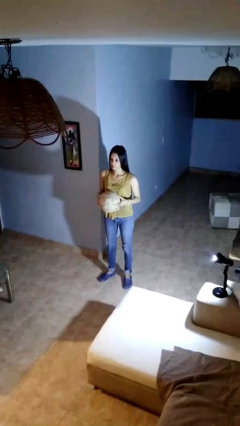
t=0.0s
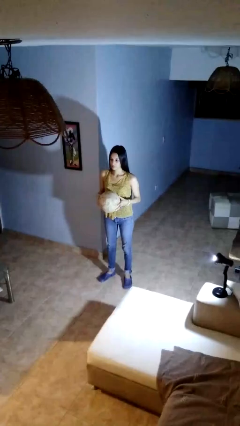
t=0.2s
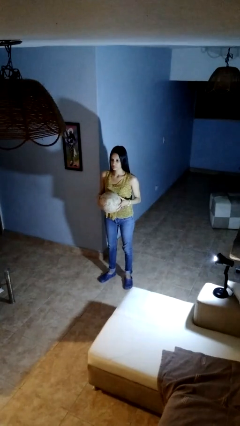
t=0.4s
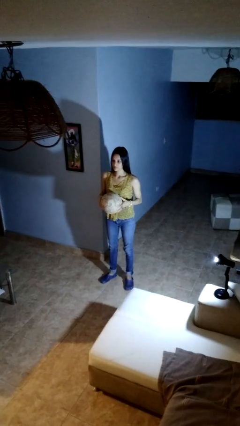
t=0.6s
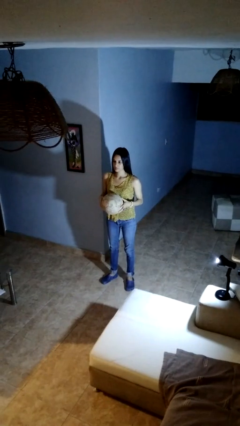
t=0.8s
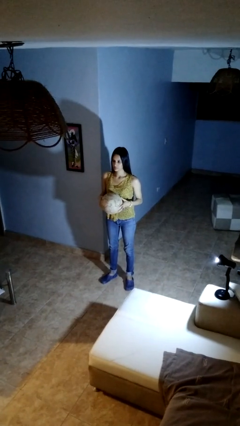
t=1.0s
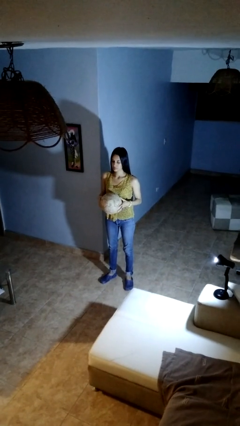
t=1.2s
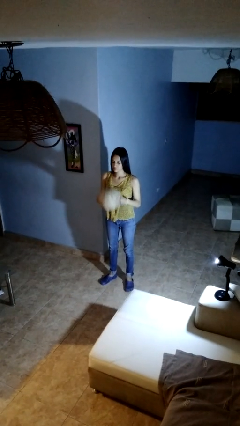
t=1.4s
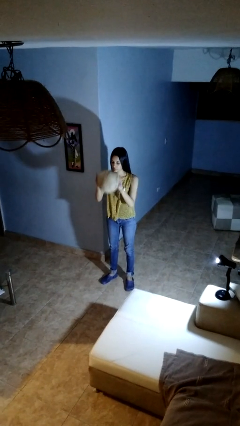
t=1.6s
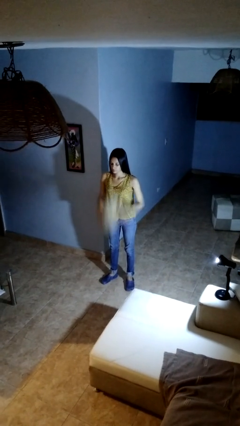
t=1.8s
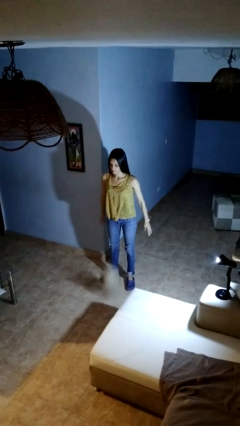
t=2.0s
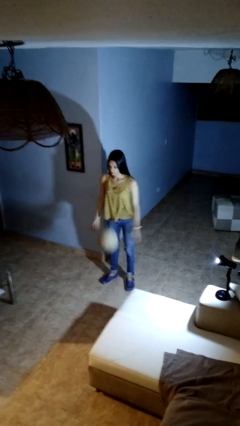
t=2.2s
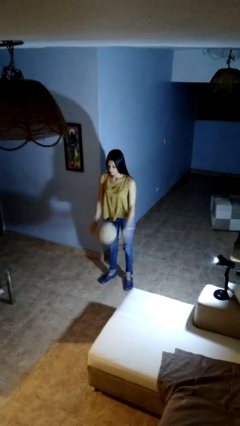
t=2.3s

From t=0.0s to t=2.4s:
person bounces ball on floor

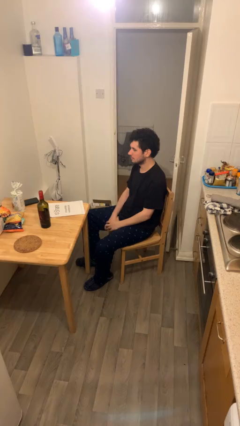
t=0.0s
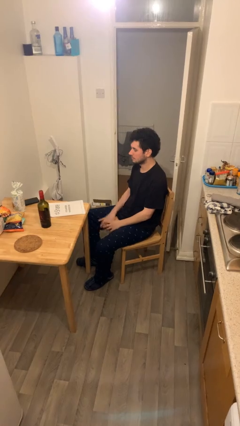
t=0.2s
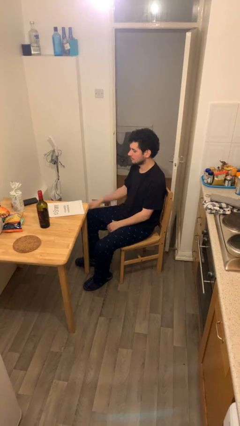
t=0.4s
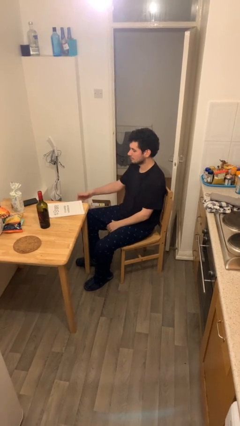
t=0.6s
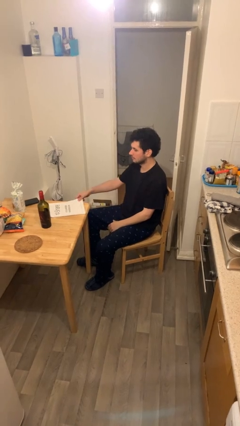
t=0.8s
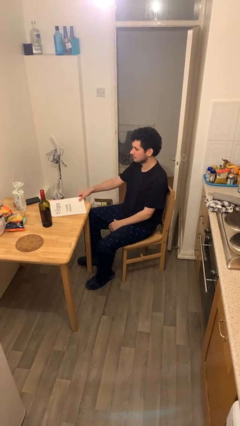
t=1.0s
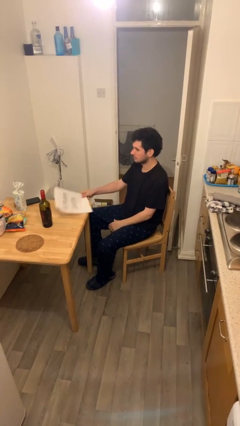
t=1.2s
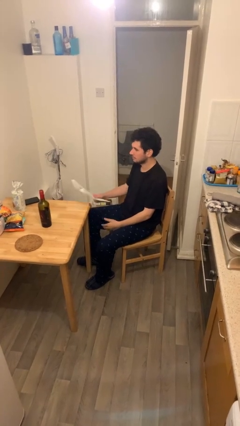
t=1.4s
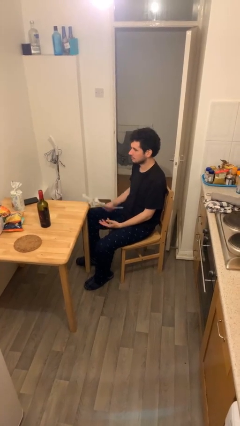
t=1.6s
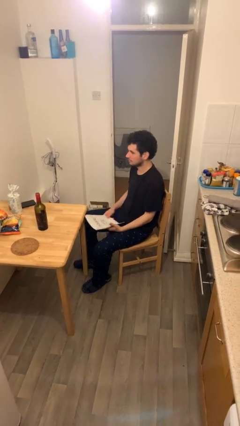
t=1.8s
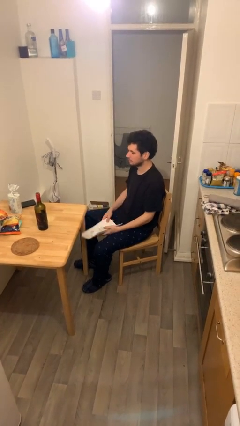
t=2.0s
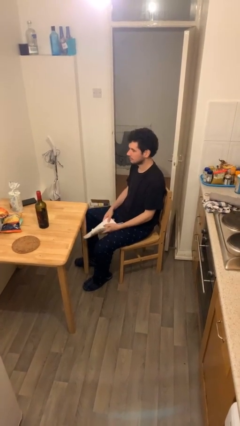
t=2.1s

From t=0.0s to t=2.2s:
person picks up object from table

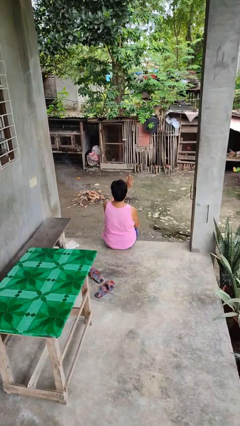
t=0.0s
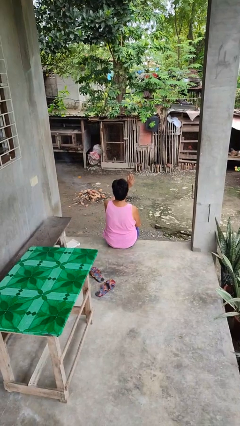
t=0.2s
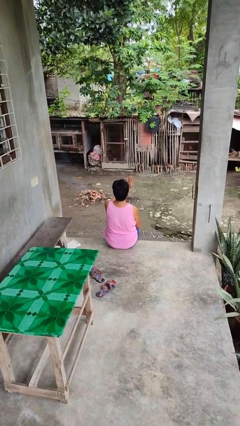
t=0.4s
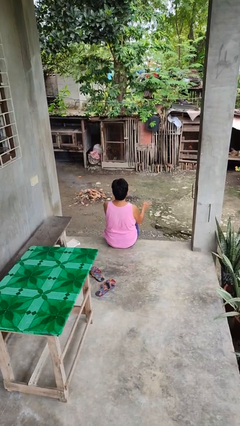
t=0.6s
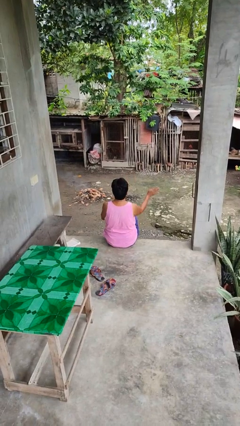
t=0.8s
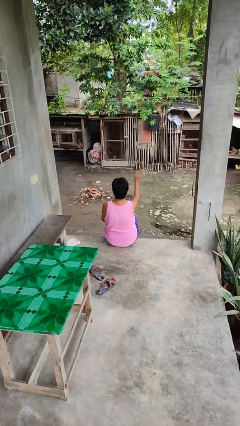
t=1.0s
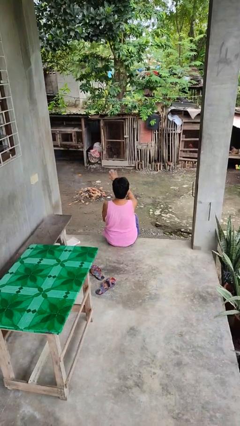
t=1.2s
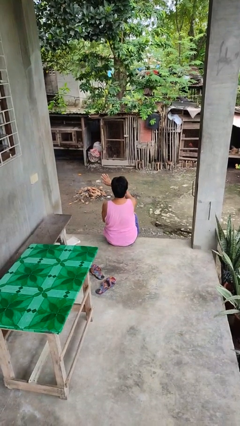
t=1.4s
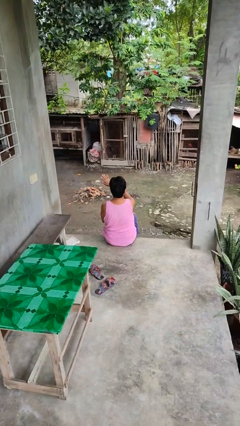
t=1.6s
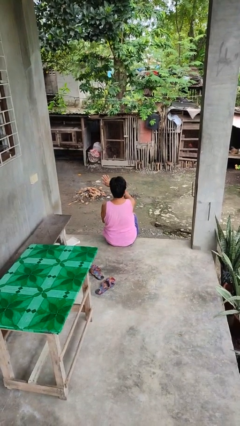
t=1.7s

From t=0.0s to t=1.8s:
person gestures swipe left

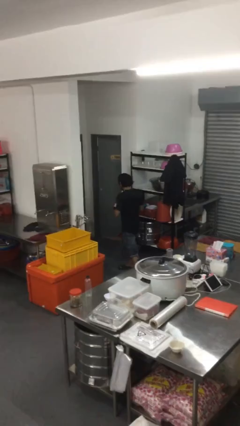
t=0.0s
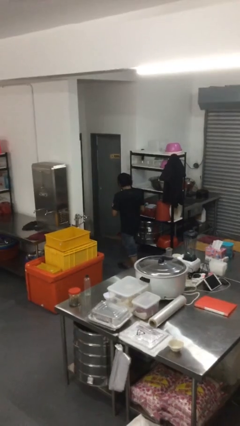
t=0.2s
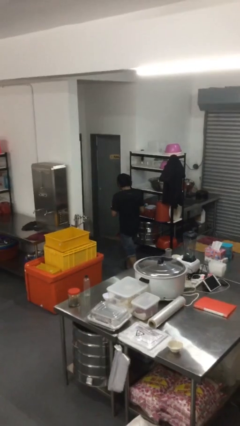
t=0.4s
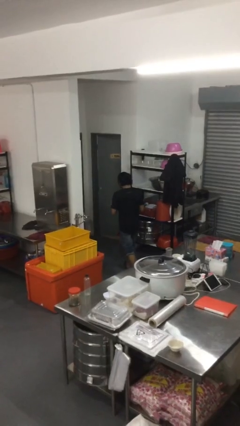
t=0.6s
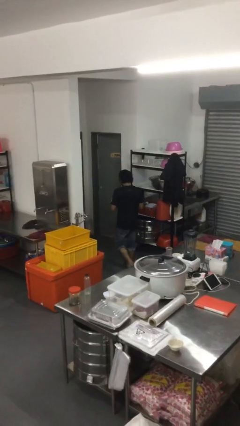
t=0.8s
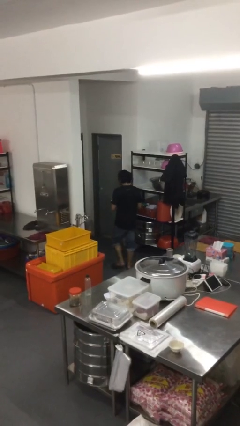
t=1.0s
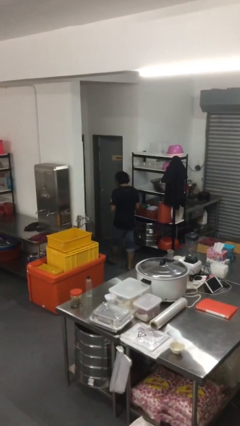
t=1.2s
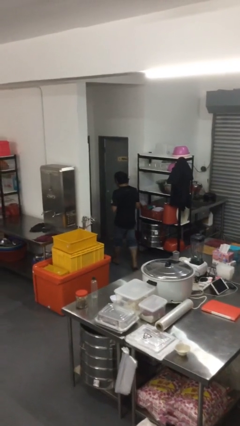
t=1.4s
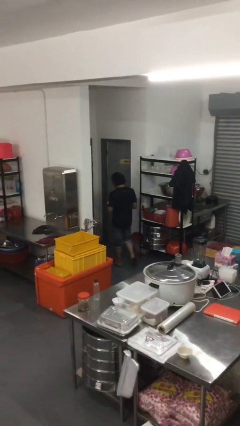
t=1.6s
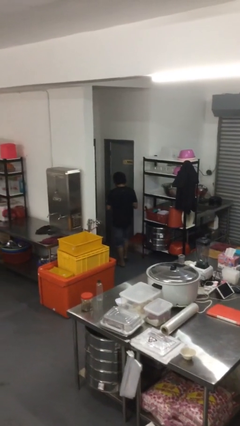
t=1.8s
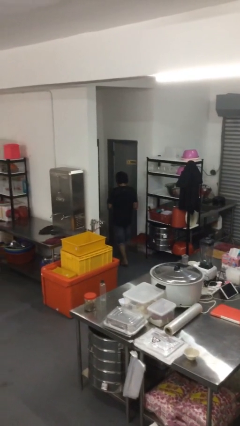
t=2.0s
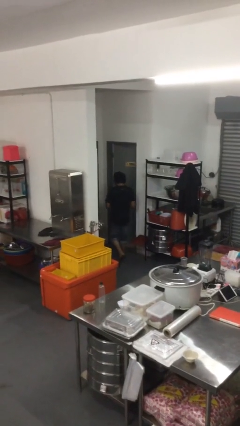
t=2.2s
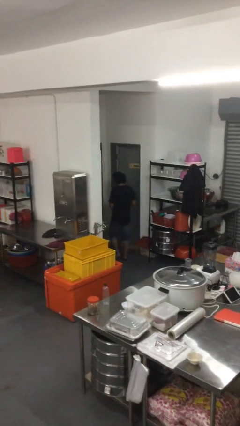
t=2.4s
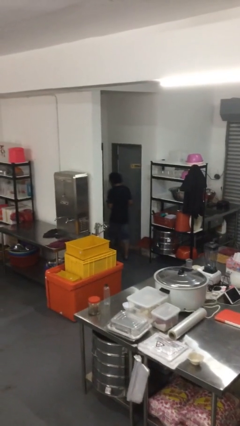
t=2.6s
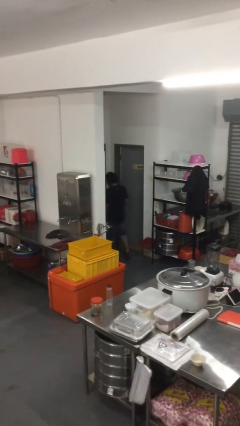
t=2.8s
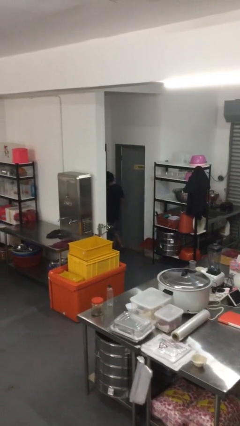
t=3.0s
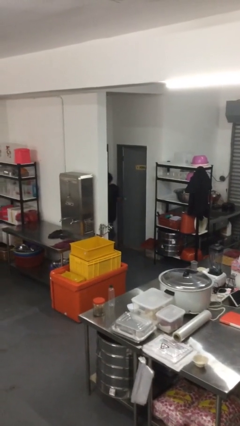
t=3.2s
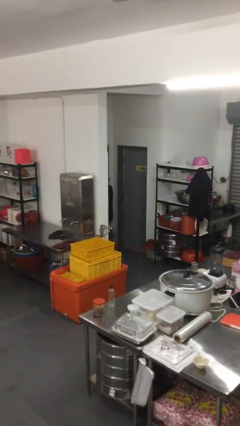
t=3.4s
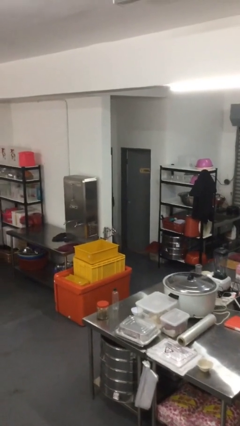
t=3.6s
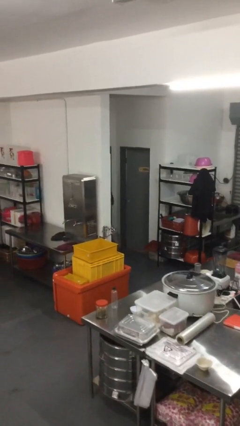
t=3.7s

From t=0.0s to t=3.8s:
person exits scene through structure

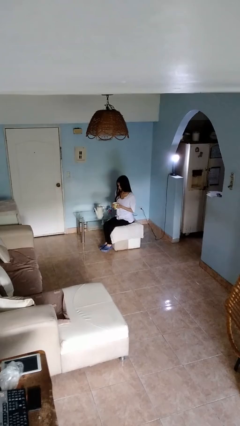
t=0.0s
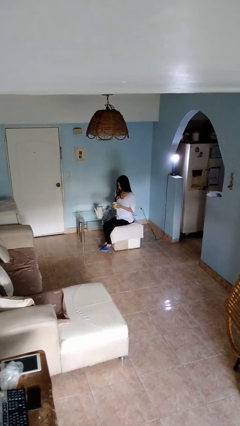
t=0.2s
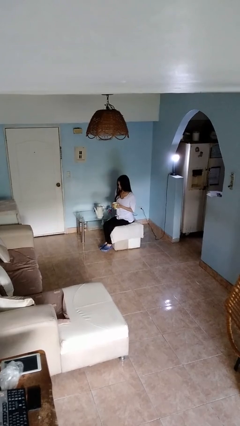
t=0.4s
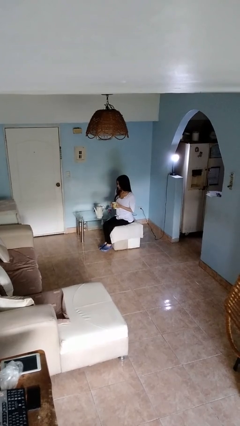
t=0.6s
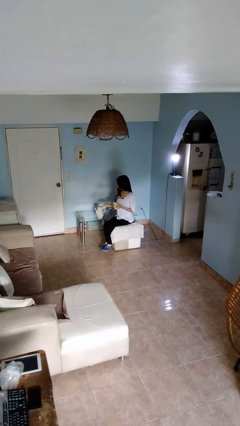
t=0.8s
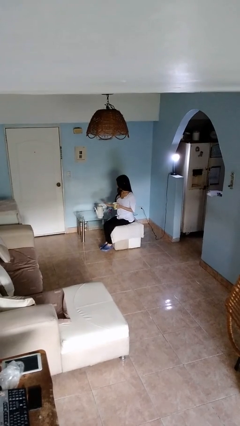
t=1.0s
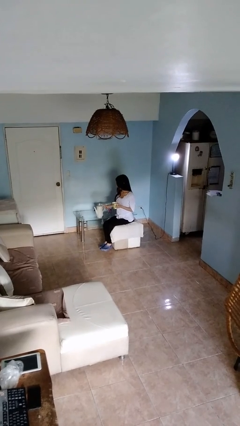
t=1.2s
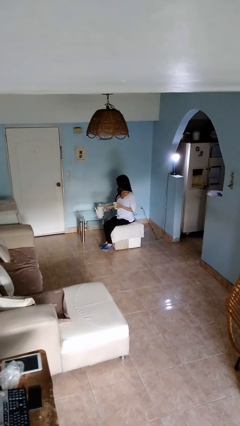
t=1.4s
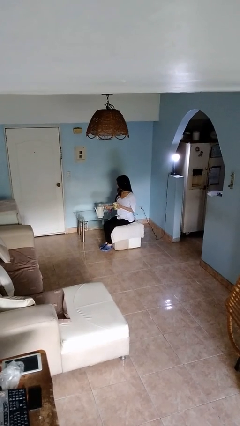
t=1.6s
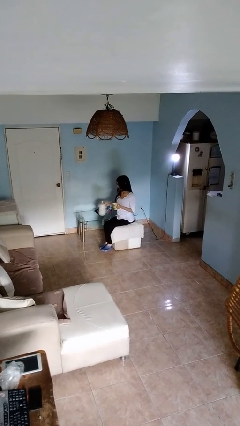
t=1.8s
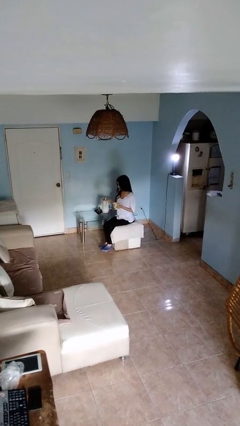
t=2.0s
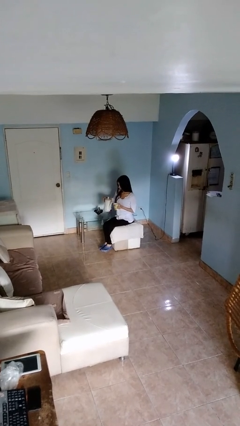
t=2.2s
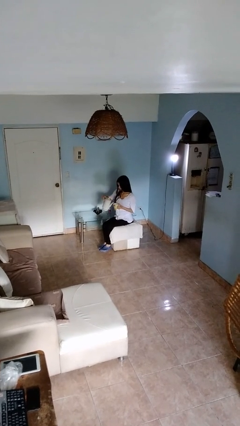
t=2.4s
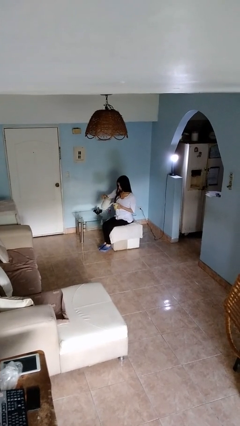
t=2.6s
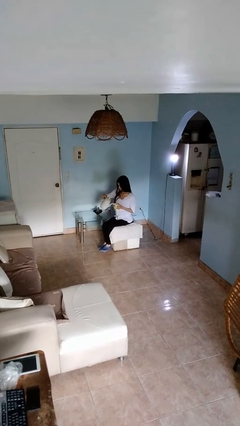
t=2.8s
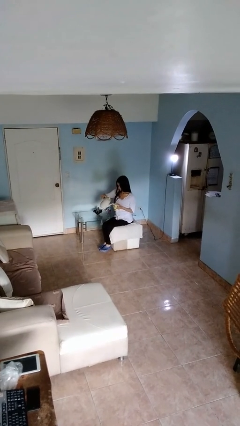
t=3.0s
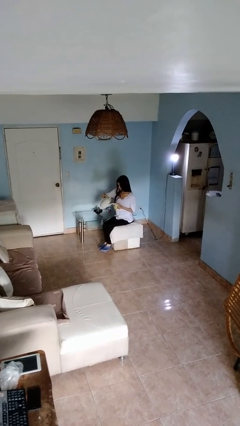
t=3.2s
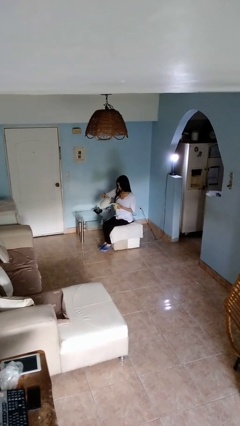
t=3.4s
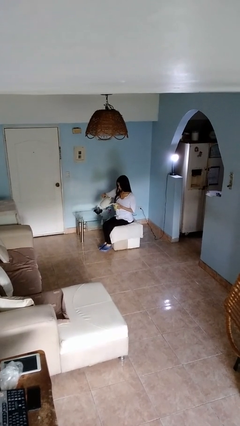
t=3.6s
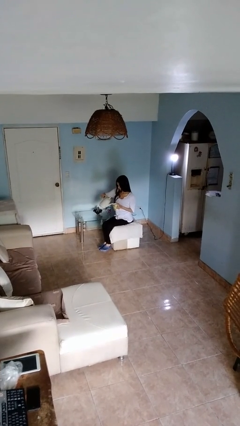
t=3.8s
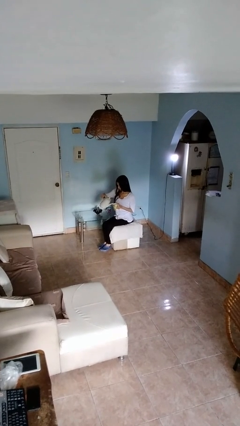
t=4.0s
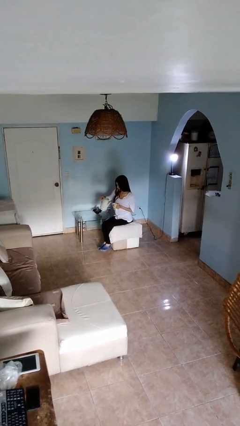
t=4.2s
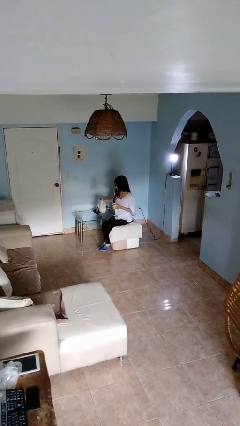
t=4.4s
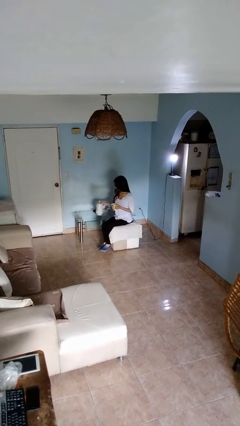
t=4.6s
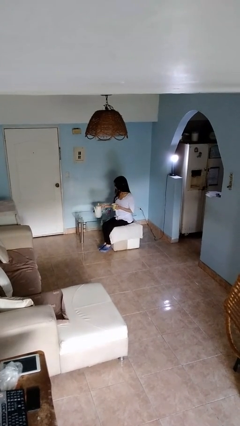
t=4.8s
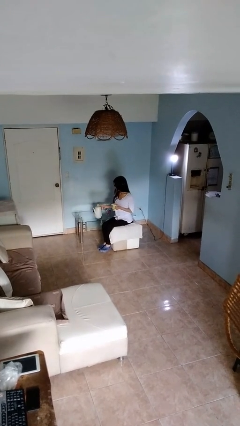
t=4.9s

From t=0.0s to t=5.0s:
person pours coffee into mug

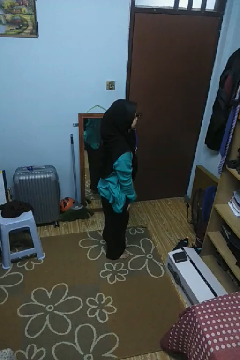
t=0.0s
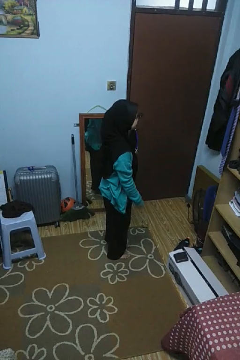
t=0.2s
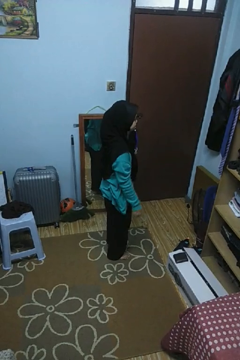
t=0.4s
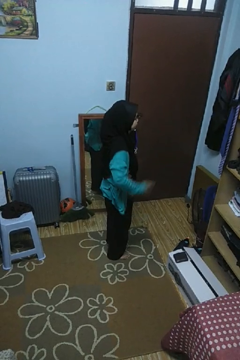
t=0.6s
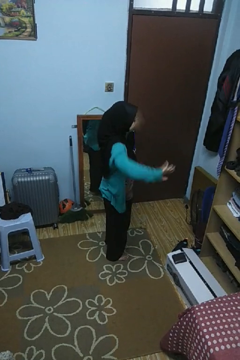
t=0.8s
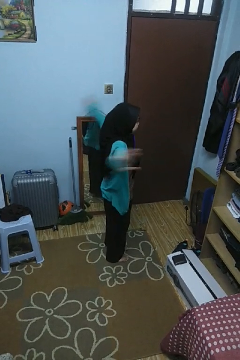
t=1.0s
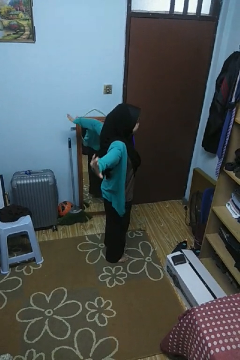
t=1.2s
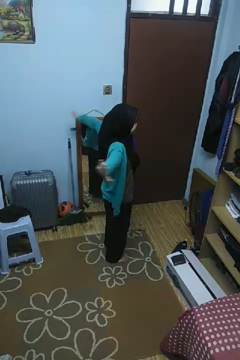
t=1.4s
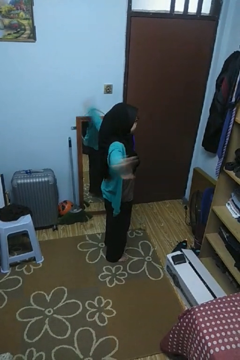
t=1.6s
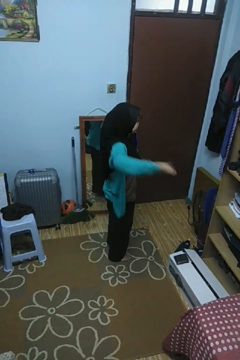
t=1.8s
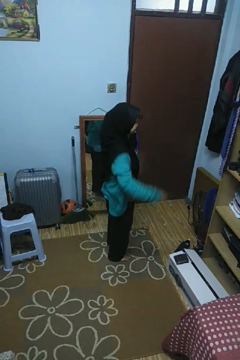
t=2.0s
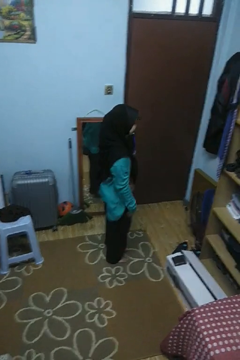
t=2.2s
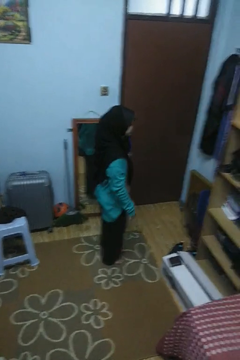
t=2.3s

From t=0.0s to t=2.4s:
person stretches arms to side

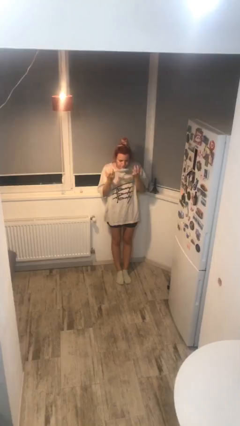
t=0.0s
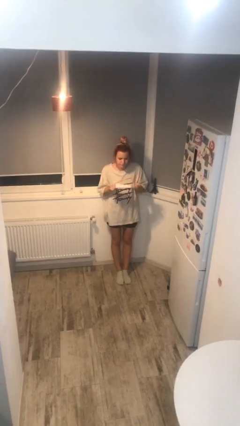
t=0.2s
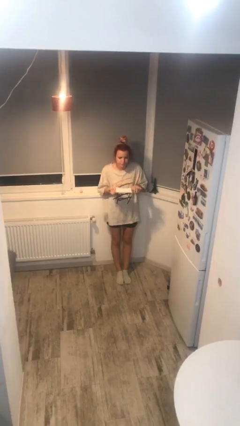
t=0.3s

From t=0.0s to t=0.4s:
person takes off facemask
